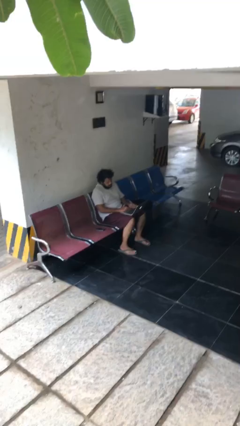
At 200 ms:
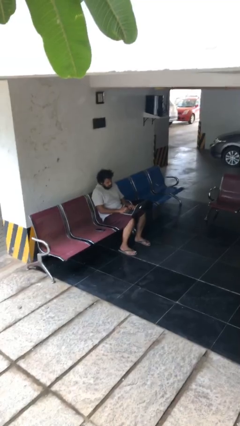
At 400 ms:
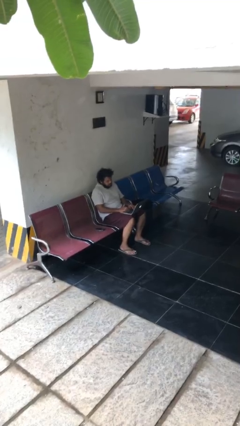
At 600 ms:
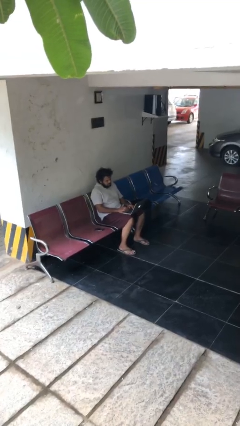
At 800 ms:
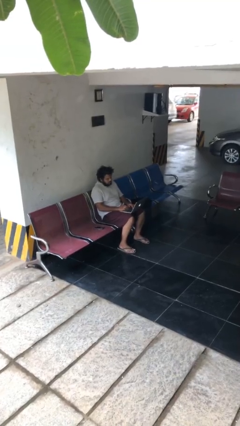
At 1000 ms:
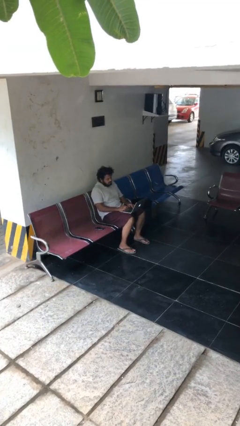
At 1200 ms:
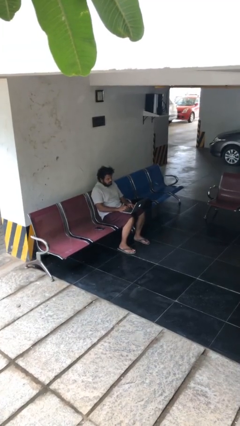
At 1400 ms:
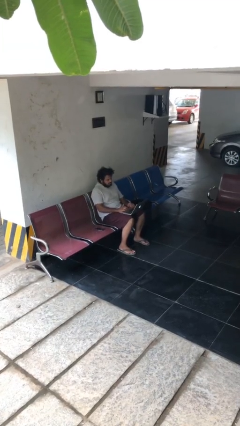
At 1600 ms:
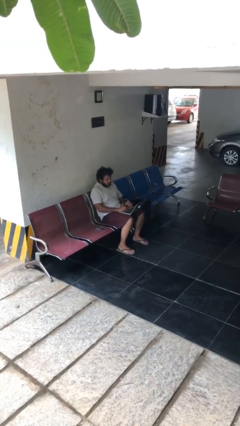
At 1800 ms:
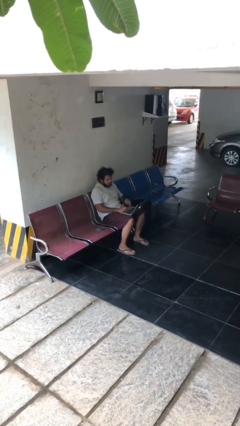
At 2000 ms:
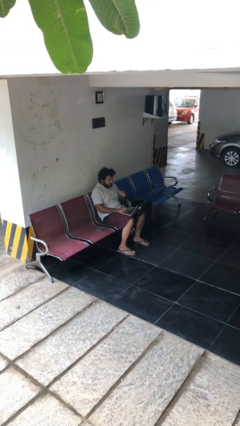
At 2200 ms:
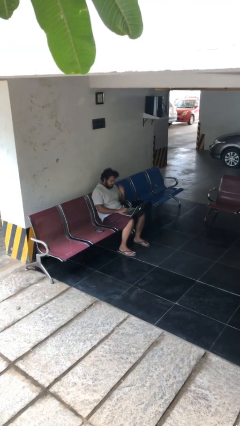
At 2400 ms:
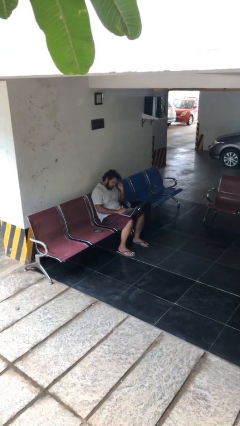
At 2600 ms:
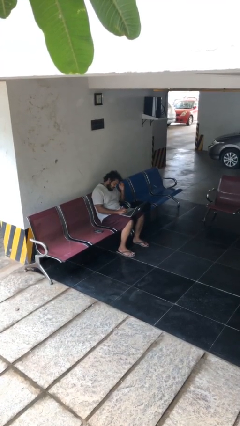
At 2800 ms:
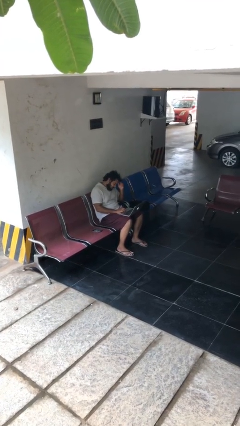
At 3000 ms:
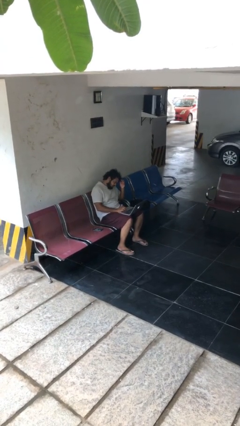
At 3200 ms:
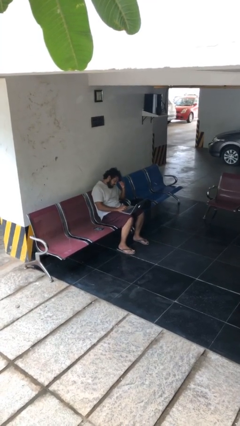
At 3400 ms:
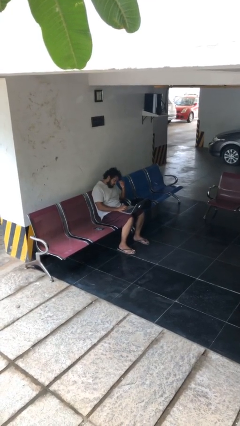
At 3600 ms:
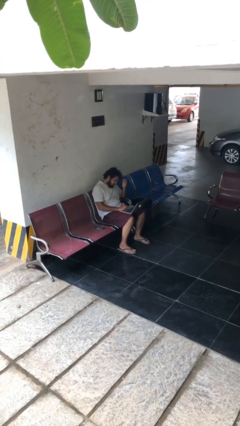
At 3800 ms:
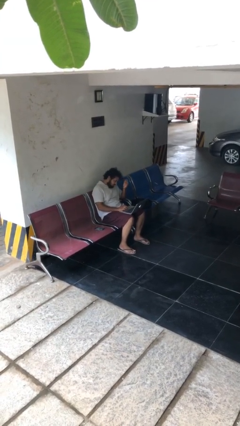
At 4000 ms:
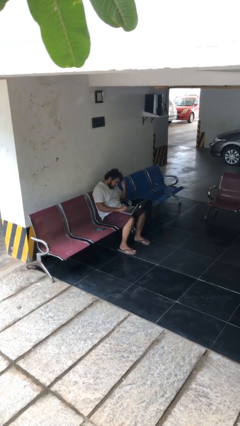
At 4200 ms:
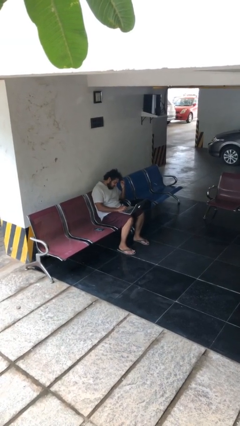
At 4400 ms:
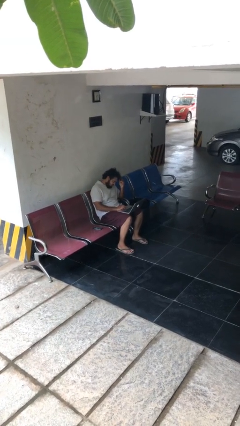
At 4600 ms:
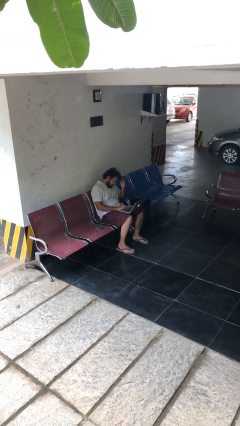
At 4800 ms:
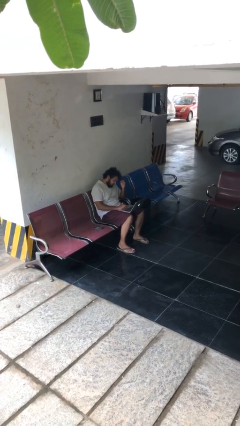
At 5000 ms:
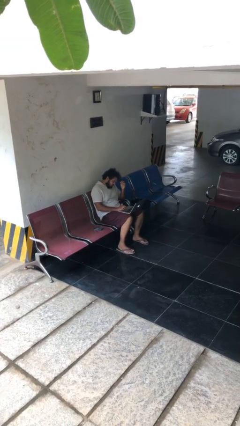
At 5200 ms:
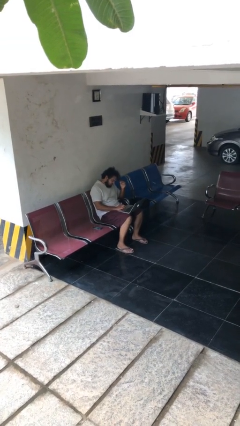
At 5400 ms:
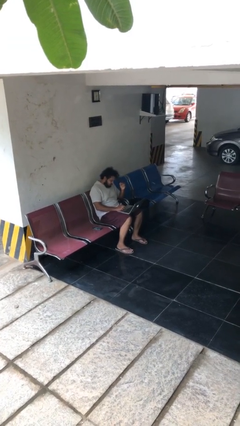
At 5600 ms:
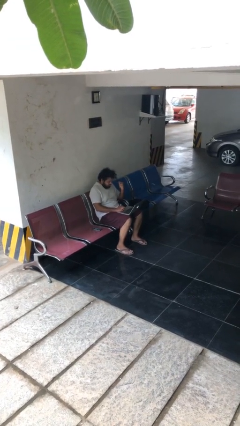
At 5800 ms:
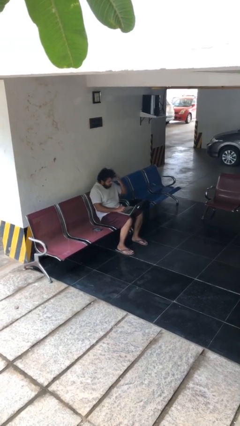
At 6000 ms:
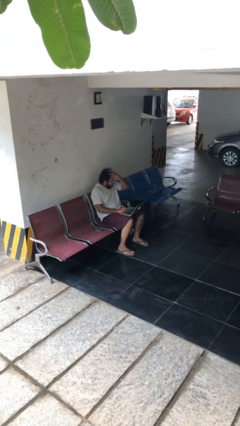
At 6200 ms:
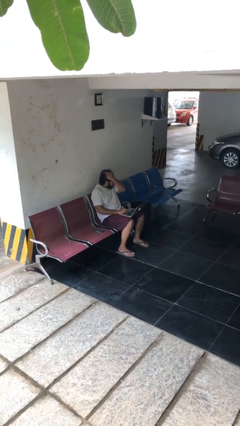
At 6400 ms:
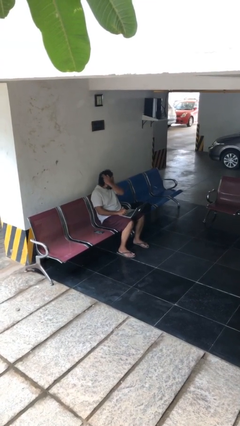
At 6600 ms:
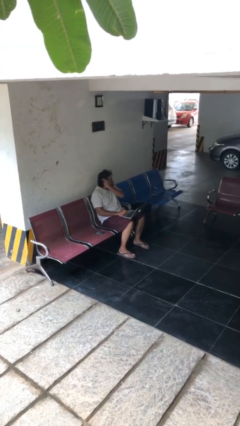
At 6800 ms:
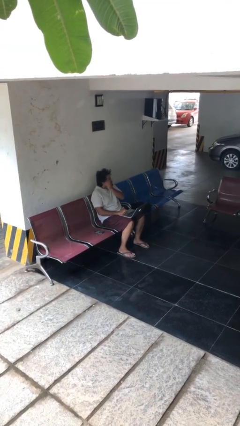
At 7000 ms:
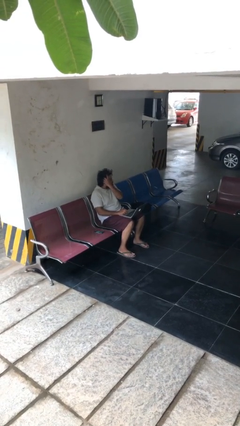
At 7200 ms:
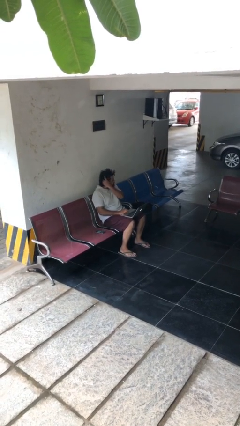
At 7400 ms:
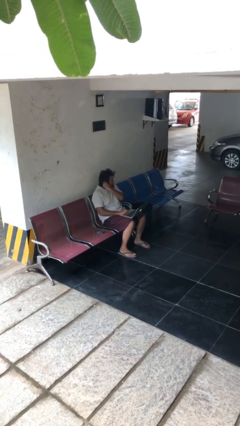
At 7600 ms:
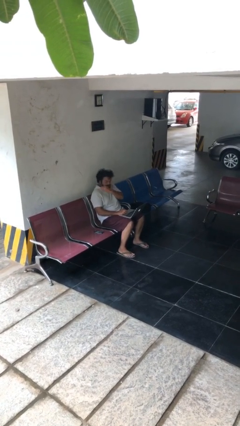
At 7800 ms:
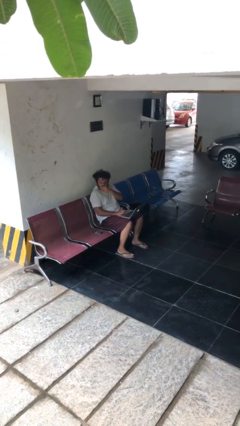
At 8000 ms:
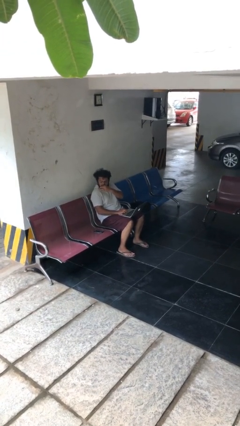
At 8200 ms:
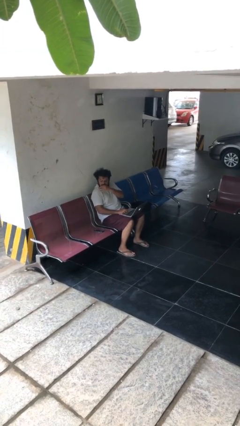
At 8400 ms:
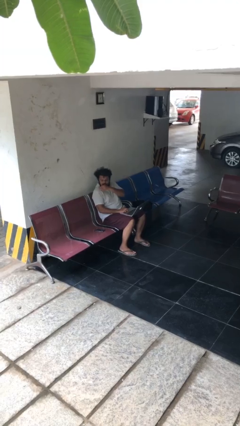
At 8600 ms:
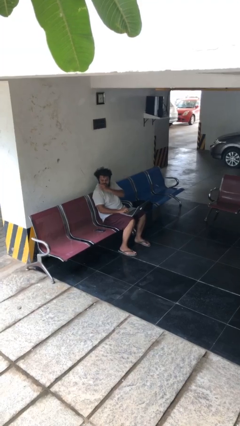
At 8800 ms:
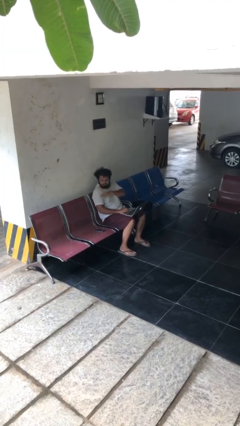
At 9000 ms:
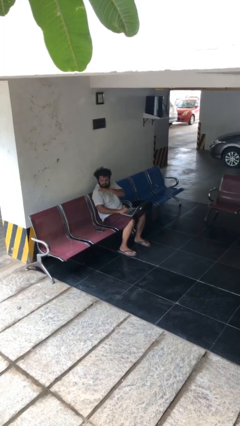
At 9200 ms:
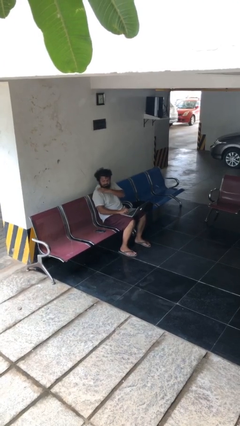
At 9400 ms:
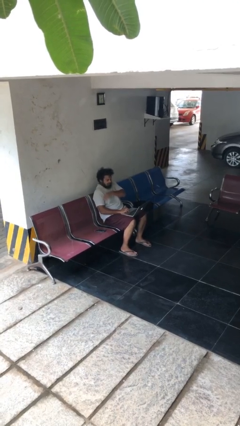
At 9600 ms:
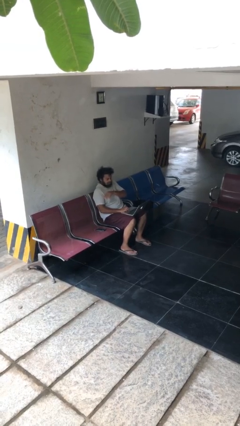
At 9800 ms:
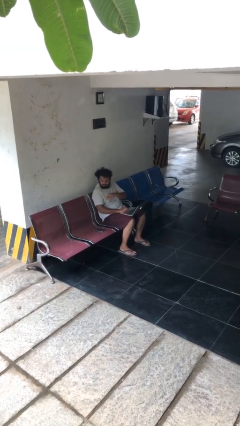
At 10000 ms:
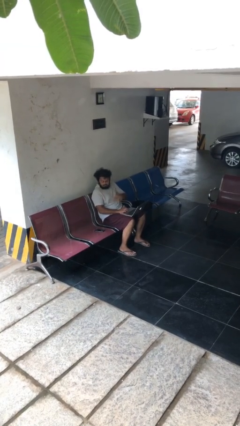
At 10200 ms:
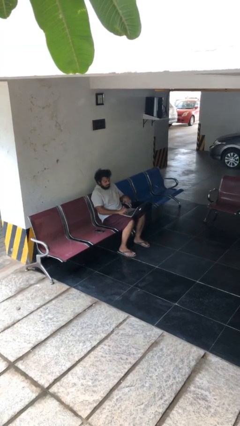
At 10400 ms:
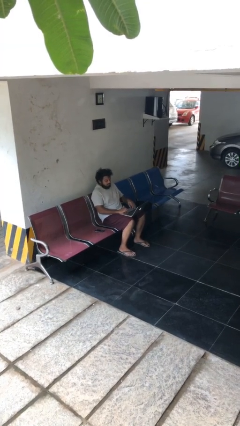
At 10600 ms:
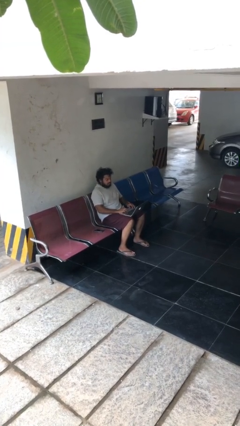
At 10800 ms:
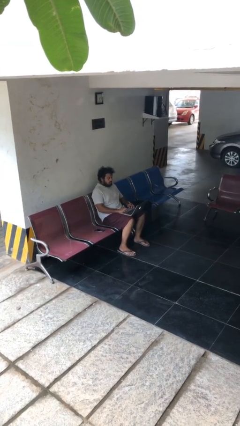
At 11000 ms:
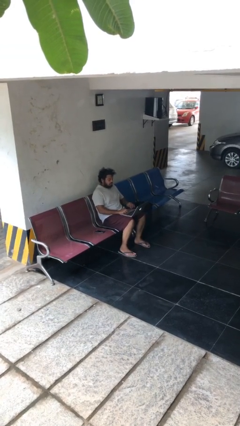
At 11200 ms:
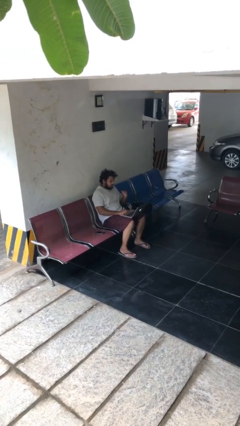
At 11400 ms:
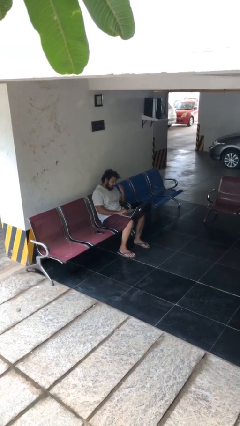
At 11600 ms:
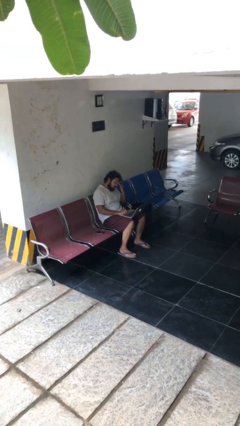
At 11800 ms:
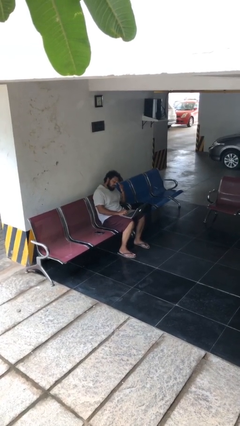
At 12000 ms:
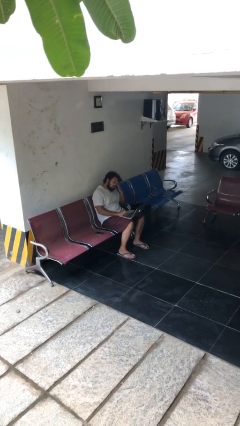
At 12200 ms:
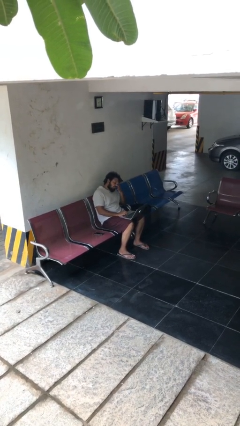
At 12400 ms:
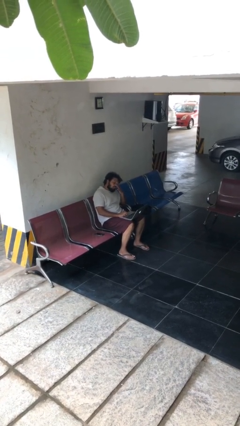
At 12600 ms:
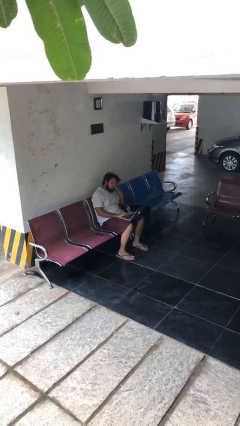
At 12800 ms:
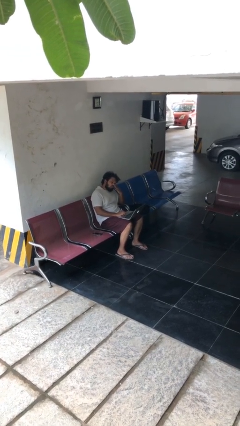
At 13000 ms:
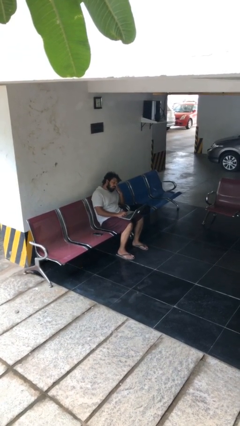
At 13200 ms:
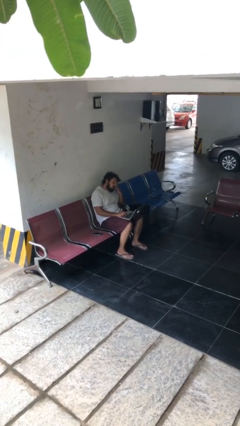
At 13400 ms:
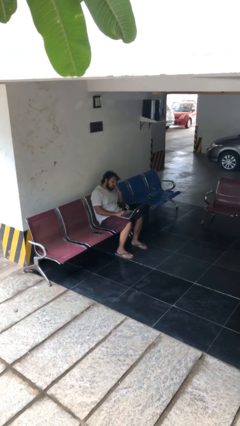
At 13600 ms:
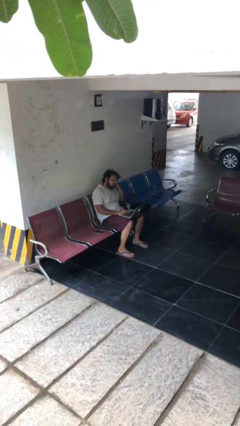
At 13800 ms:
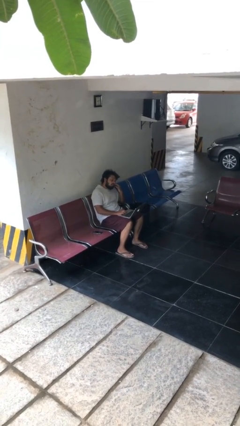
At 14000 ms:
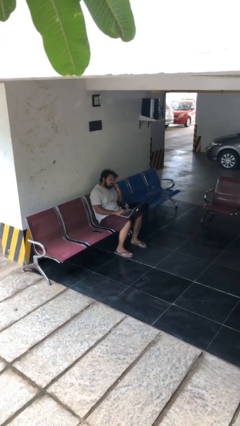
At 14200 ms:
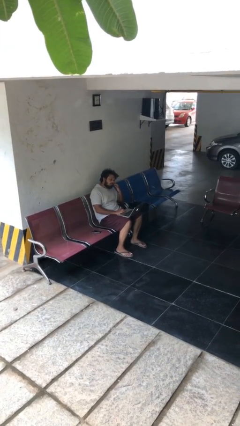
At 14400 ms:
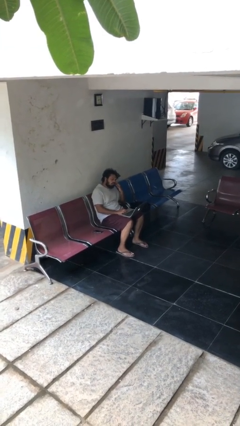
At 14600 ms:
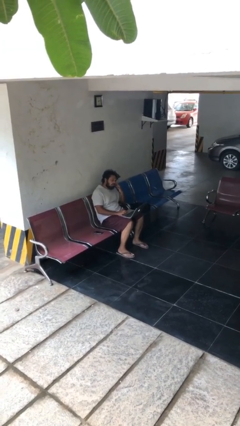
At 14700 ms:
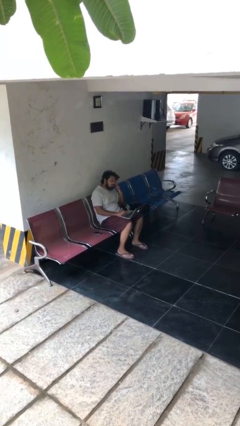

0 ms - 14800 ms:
person interacts with laptop

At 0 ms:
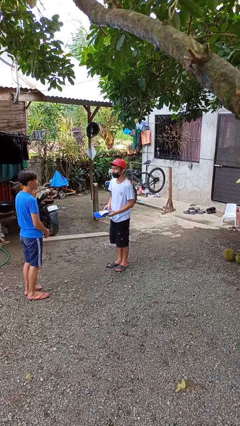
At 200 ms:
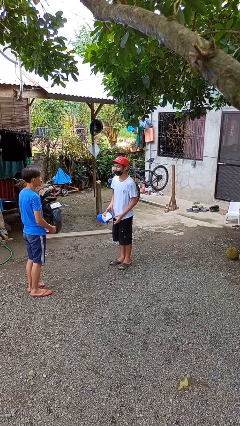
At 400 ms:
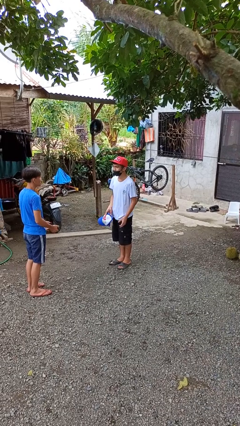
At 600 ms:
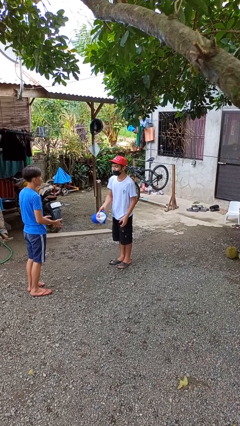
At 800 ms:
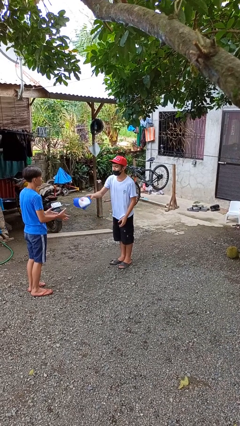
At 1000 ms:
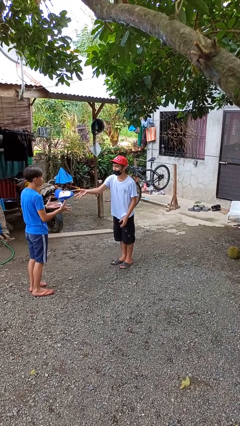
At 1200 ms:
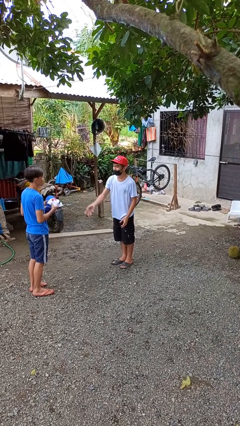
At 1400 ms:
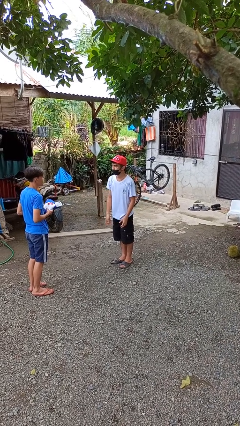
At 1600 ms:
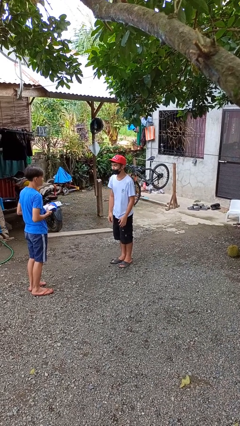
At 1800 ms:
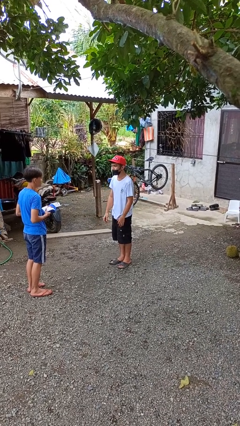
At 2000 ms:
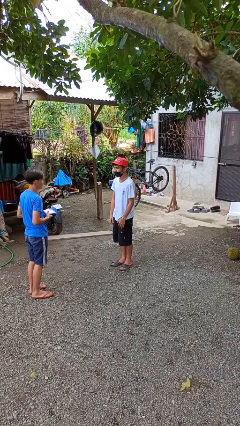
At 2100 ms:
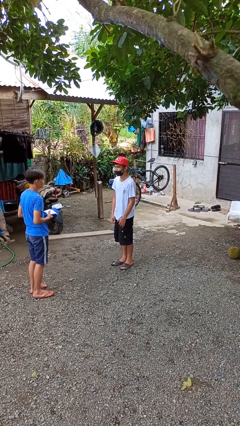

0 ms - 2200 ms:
person throws object to person

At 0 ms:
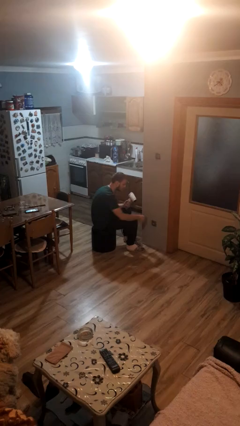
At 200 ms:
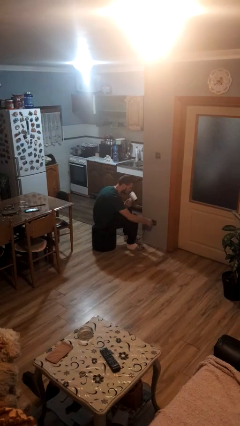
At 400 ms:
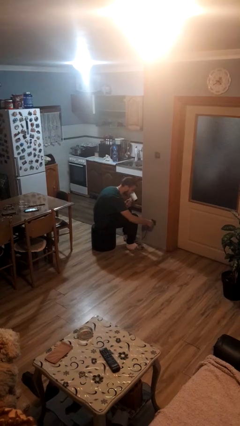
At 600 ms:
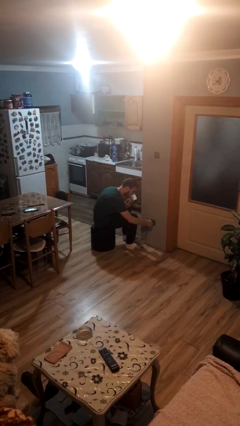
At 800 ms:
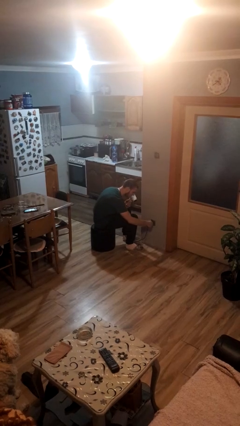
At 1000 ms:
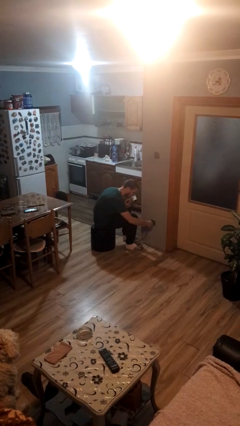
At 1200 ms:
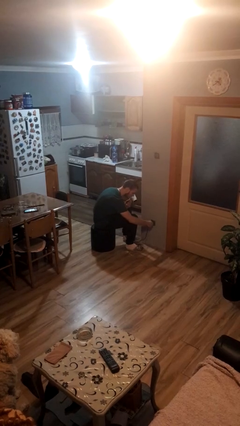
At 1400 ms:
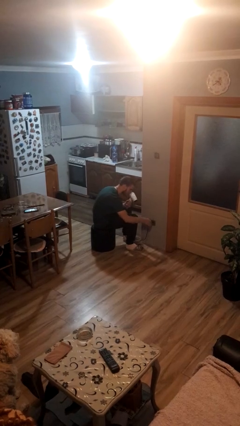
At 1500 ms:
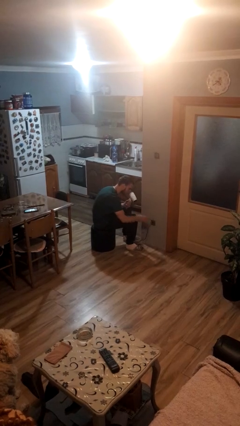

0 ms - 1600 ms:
person plugs into electrical socket
